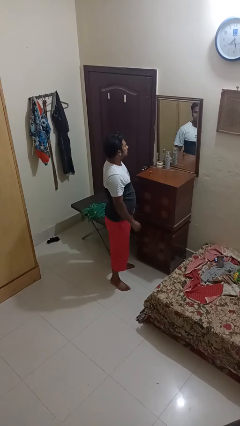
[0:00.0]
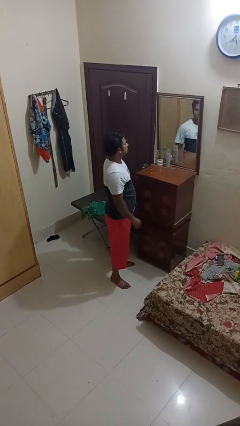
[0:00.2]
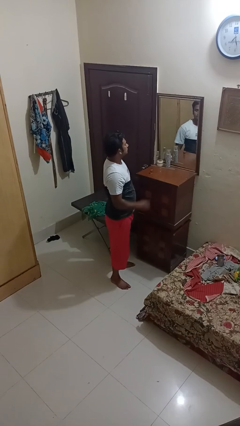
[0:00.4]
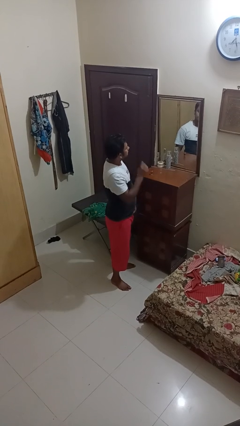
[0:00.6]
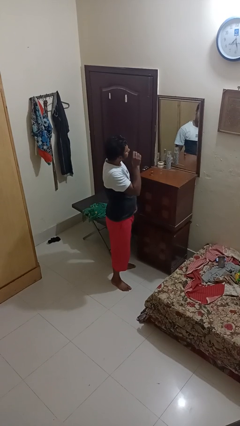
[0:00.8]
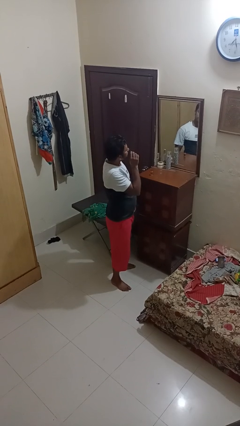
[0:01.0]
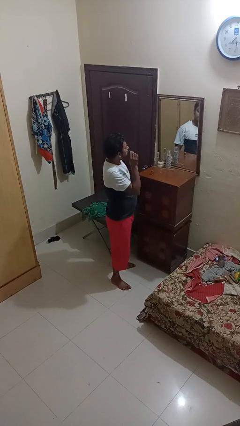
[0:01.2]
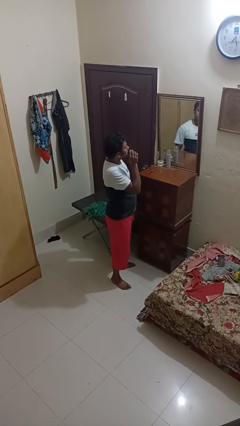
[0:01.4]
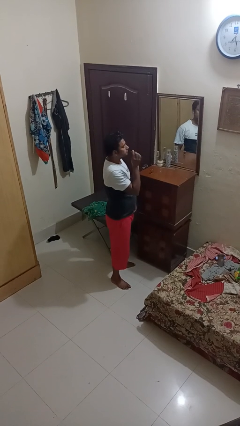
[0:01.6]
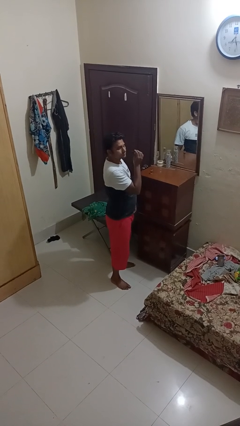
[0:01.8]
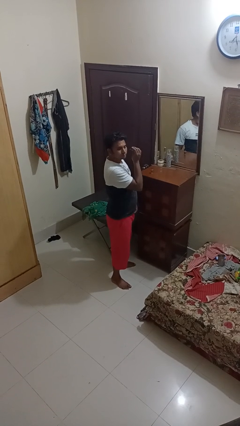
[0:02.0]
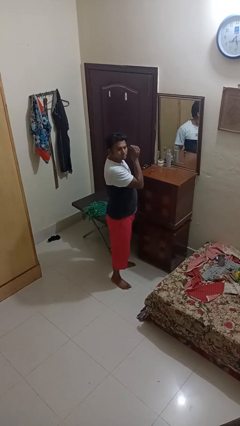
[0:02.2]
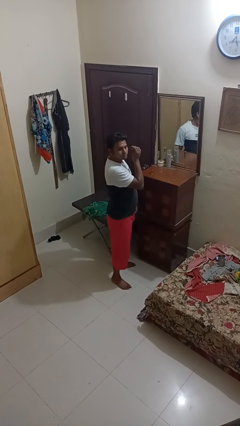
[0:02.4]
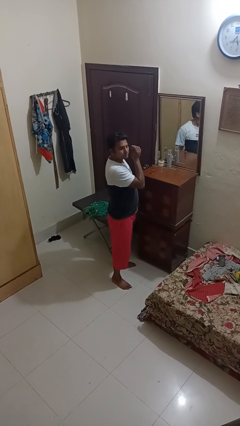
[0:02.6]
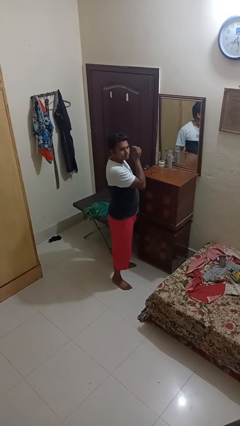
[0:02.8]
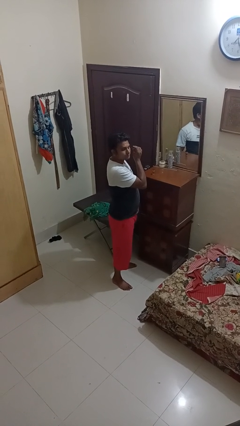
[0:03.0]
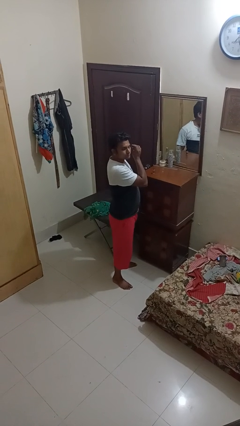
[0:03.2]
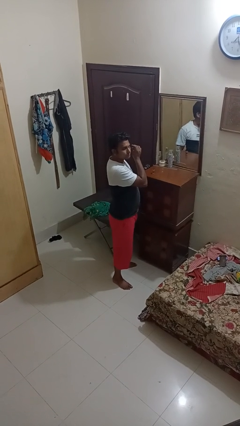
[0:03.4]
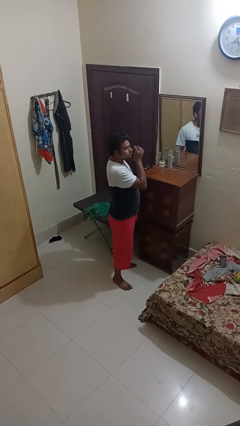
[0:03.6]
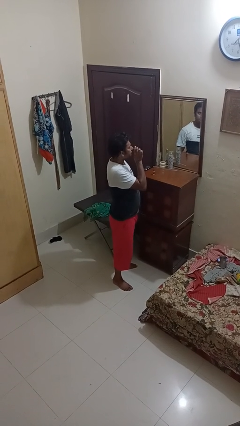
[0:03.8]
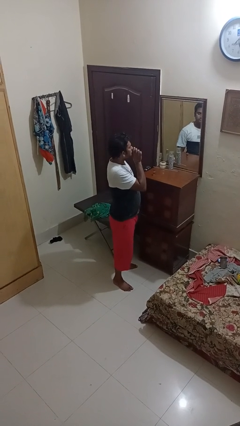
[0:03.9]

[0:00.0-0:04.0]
person applies eye makeup

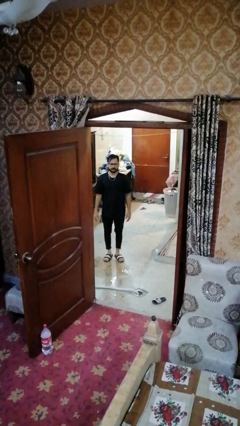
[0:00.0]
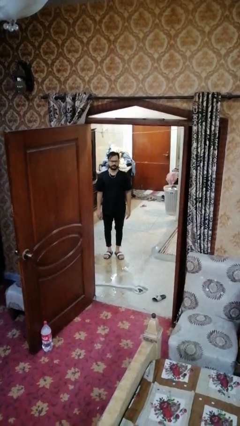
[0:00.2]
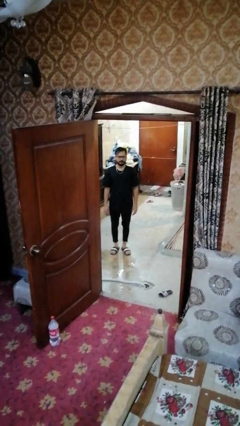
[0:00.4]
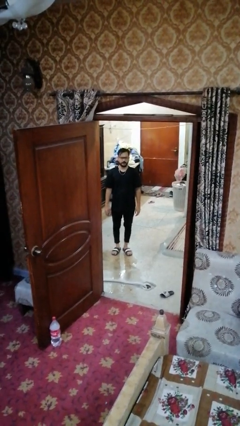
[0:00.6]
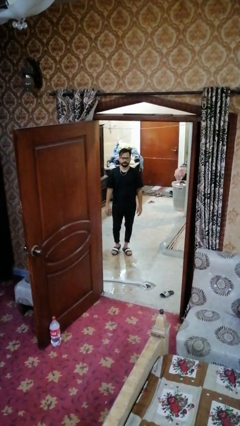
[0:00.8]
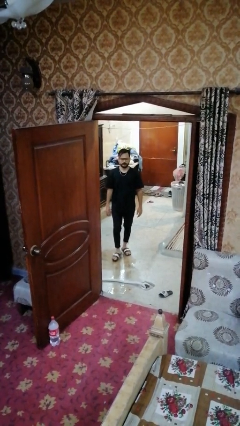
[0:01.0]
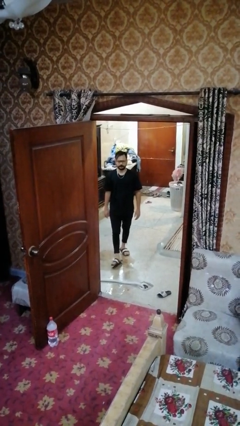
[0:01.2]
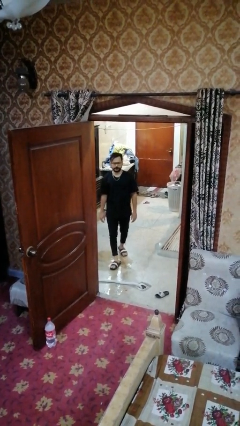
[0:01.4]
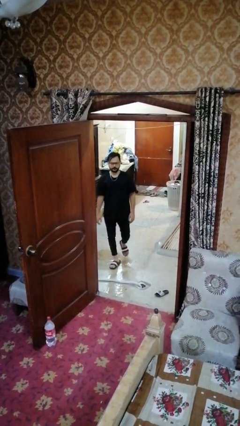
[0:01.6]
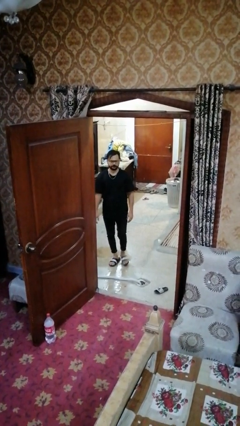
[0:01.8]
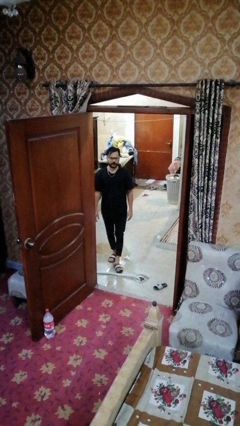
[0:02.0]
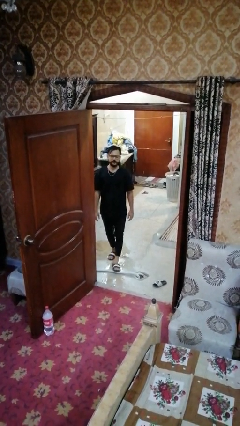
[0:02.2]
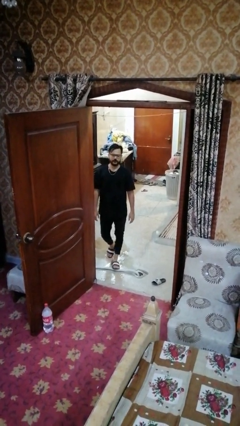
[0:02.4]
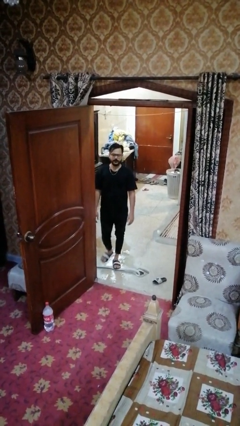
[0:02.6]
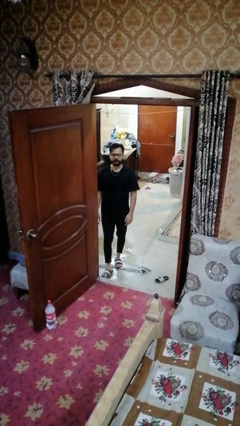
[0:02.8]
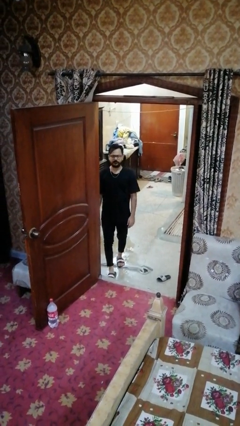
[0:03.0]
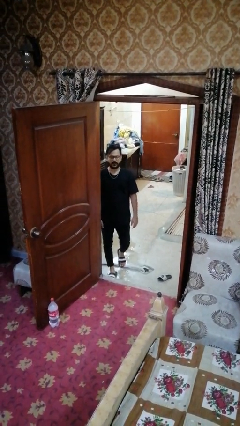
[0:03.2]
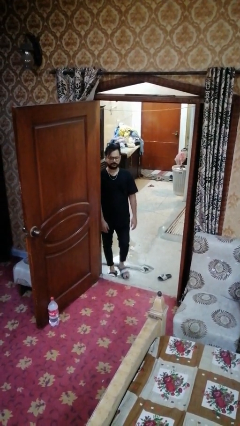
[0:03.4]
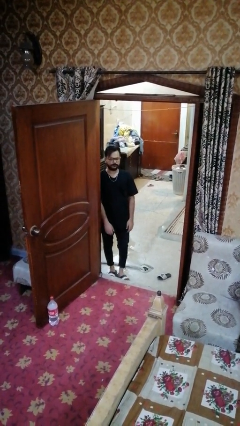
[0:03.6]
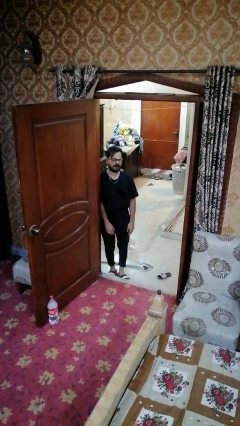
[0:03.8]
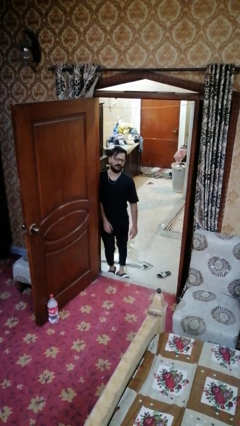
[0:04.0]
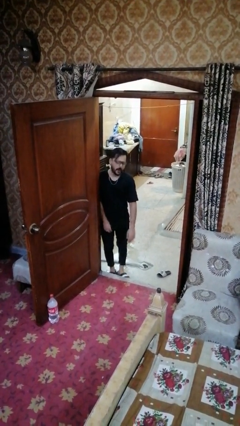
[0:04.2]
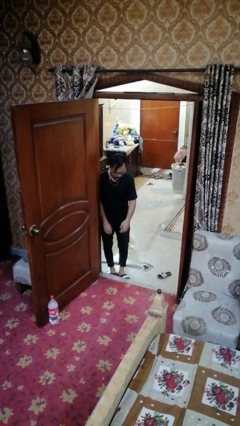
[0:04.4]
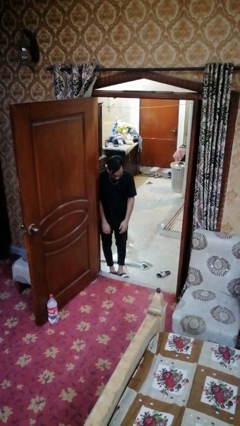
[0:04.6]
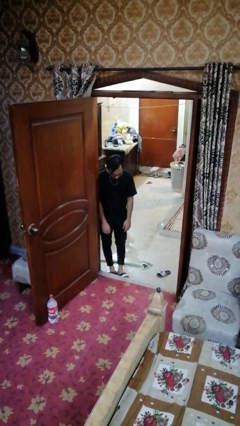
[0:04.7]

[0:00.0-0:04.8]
person bumps into wall

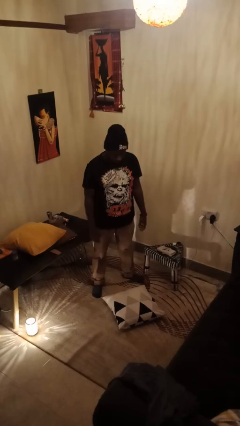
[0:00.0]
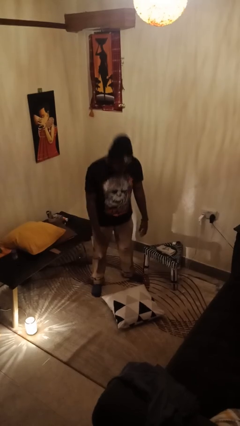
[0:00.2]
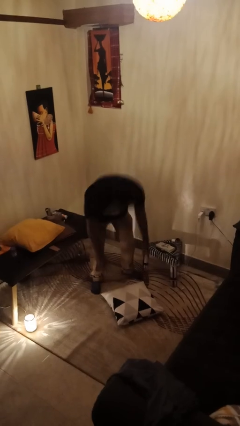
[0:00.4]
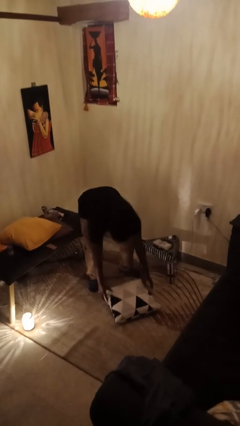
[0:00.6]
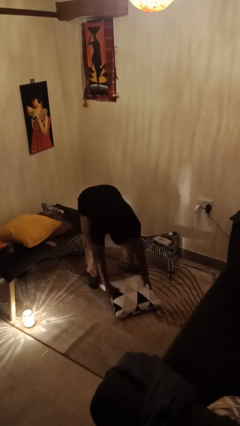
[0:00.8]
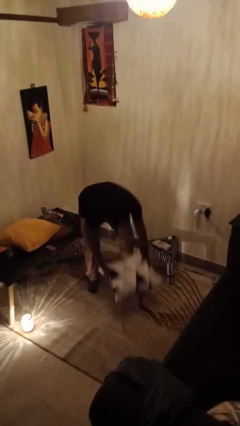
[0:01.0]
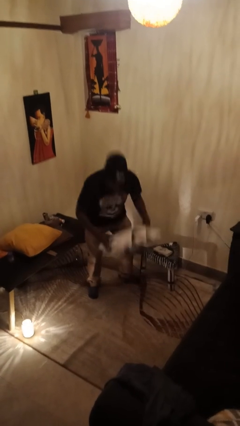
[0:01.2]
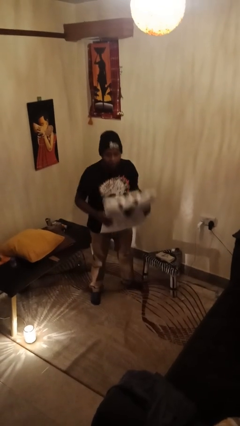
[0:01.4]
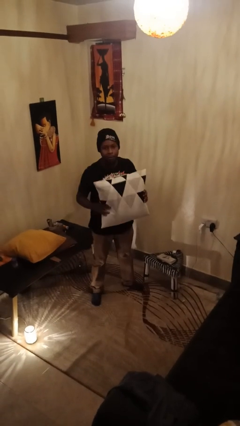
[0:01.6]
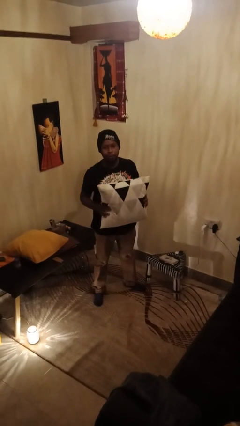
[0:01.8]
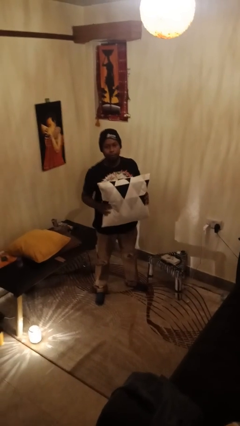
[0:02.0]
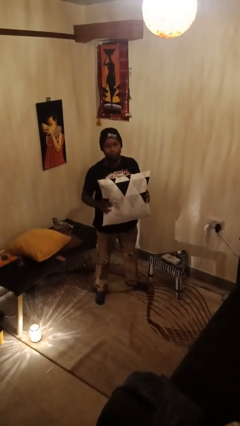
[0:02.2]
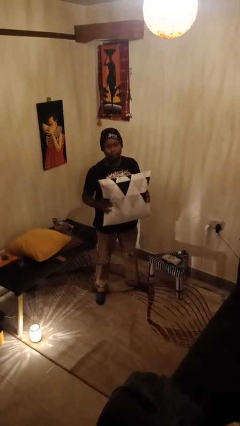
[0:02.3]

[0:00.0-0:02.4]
person picks up object from floor

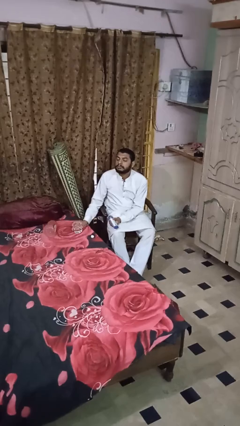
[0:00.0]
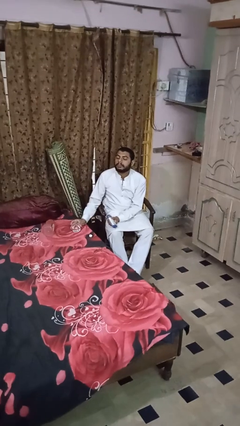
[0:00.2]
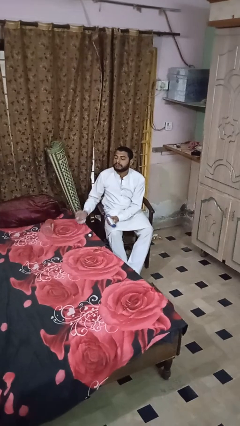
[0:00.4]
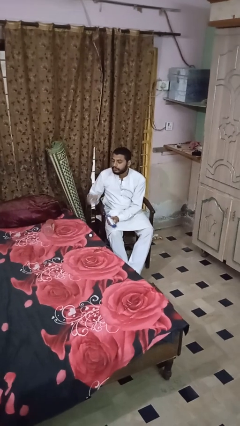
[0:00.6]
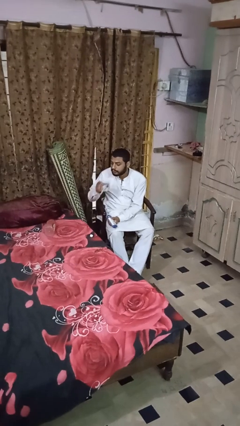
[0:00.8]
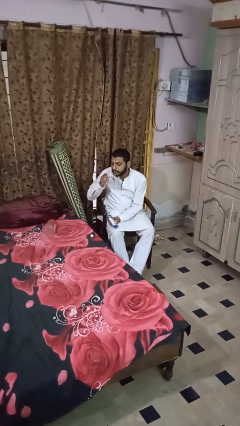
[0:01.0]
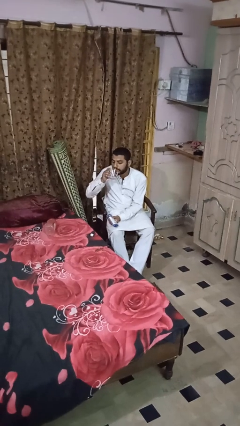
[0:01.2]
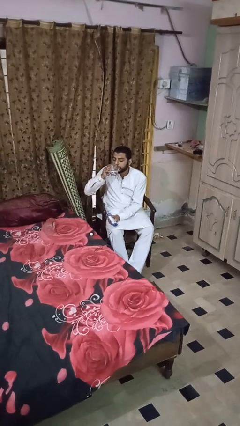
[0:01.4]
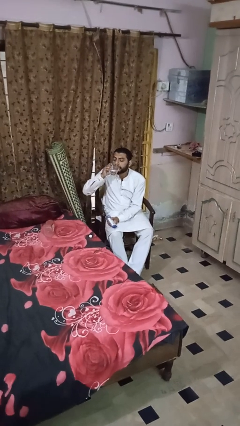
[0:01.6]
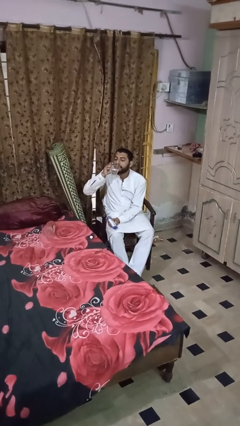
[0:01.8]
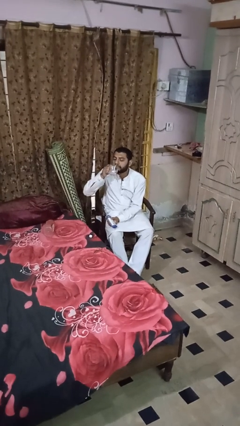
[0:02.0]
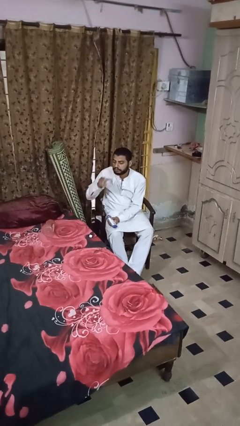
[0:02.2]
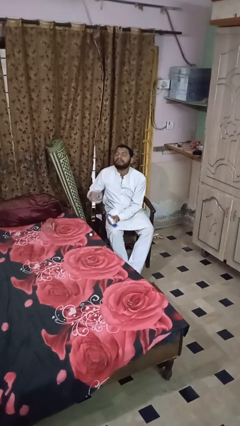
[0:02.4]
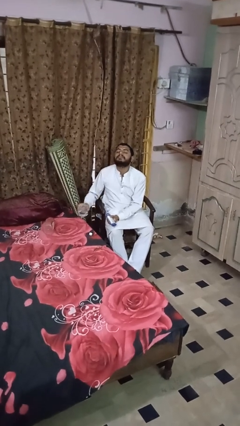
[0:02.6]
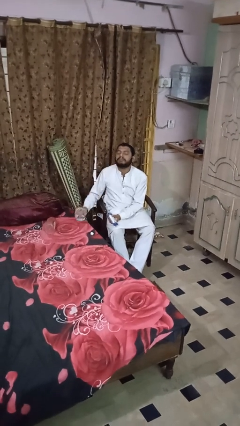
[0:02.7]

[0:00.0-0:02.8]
person drinks from cup

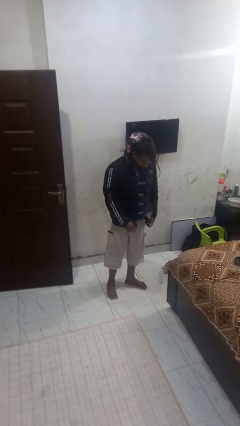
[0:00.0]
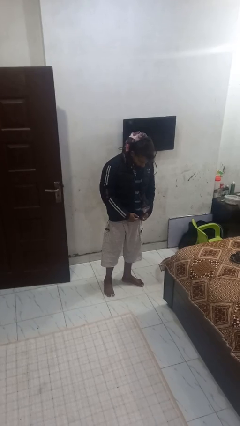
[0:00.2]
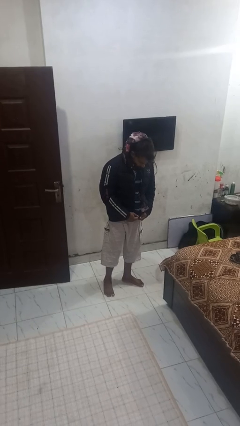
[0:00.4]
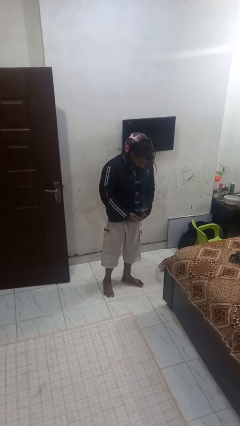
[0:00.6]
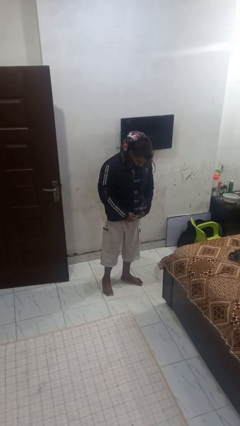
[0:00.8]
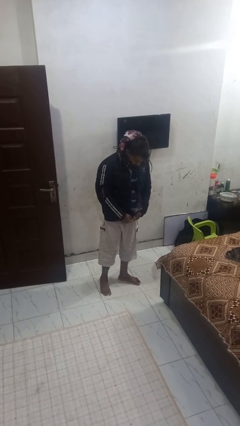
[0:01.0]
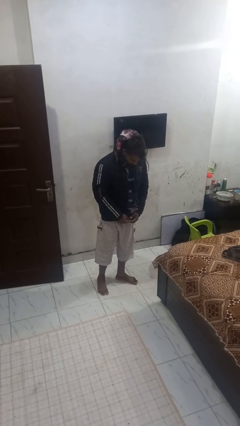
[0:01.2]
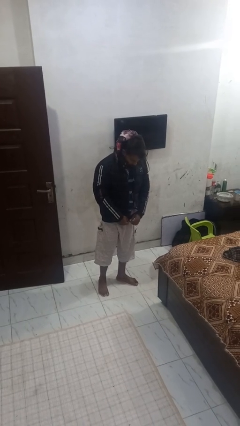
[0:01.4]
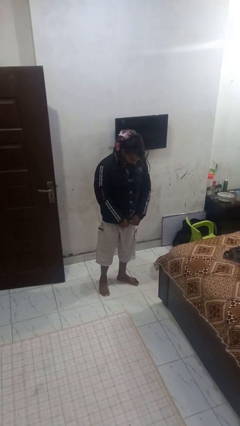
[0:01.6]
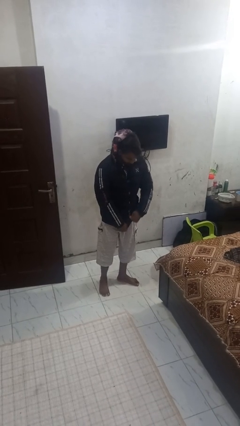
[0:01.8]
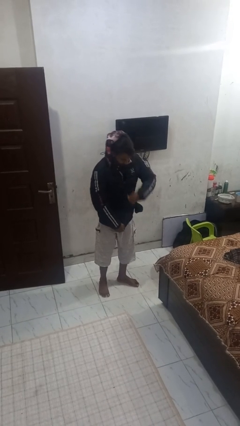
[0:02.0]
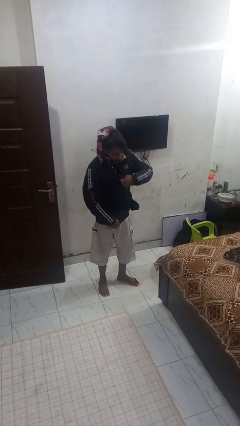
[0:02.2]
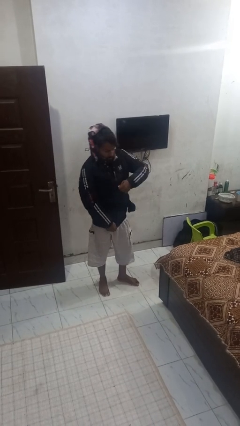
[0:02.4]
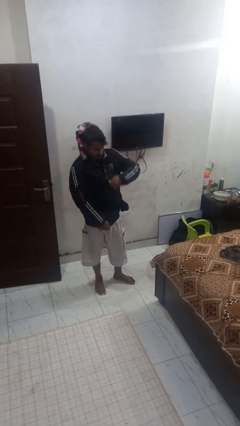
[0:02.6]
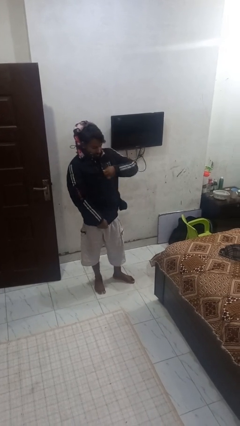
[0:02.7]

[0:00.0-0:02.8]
person zips up jacket

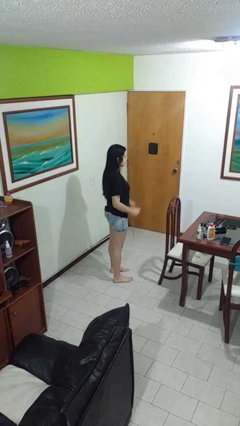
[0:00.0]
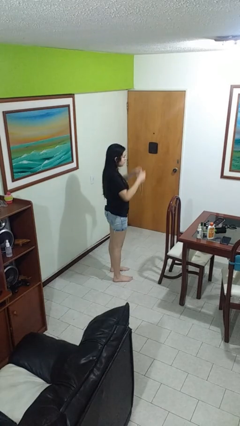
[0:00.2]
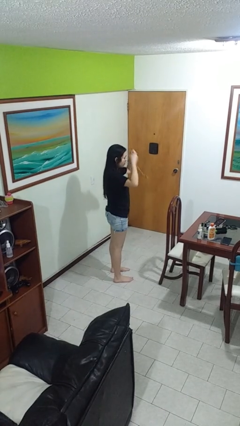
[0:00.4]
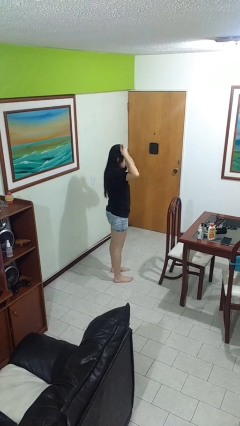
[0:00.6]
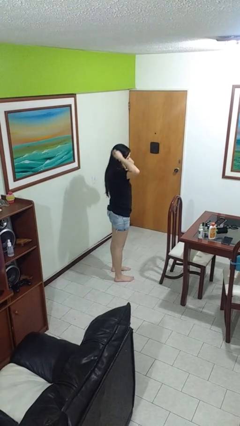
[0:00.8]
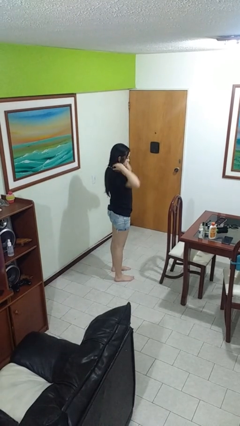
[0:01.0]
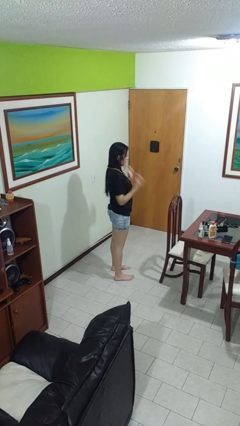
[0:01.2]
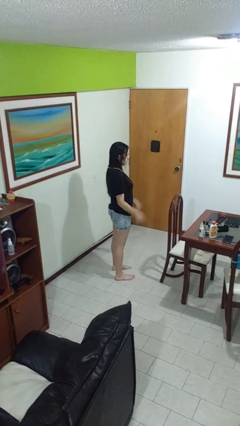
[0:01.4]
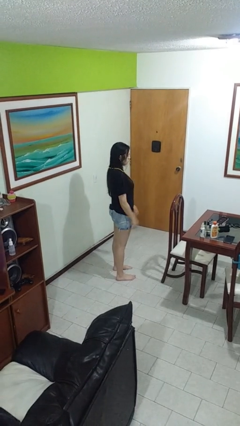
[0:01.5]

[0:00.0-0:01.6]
person puts on necklace
